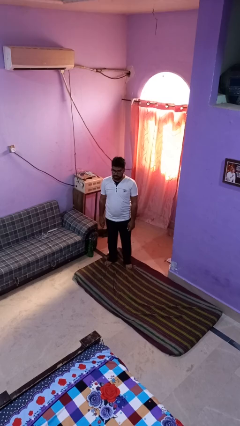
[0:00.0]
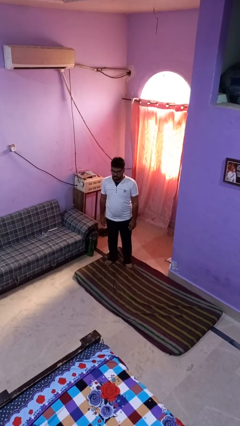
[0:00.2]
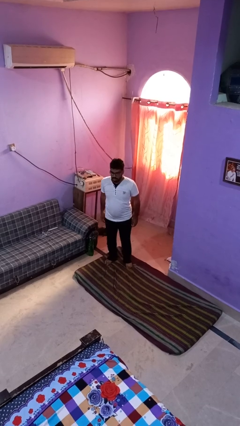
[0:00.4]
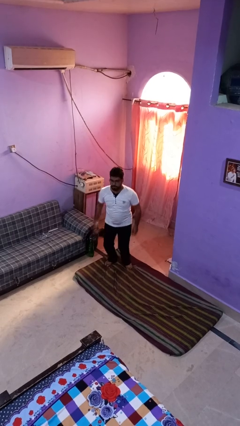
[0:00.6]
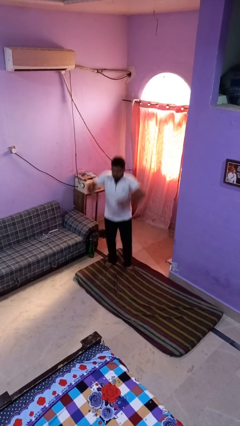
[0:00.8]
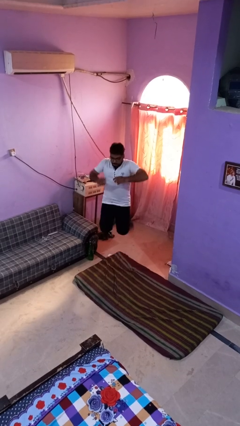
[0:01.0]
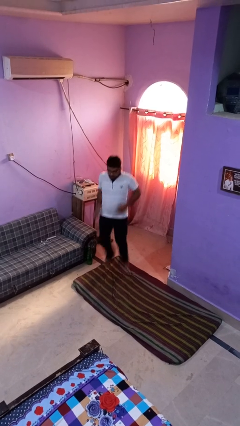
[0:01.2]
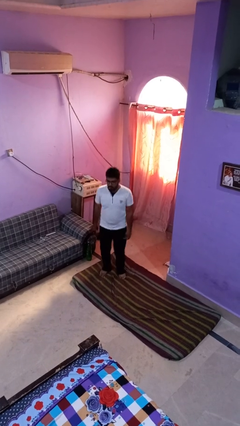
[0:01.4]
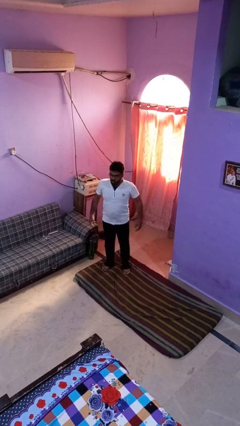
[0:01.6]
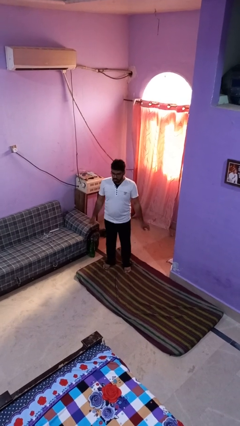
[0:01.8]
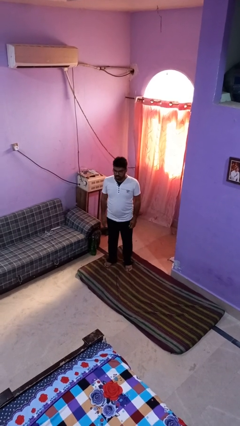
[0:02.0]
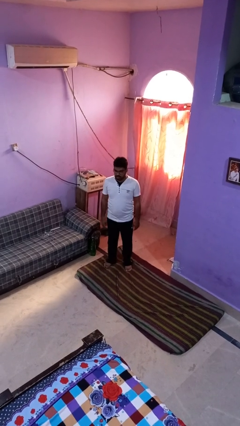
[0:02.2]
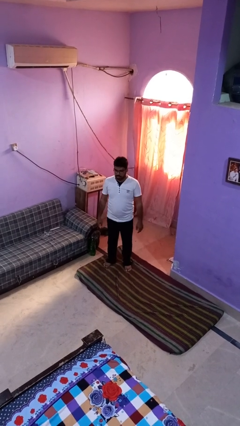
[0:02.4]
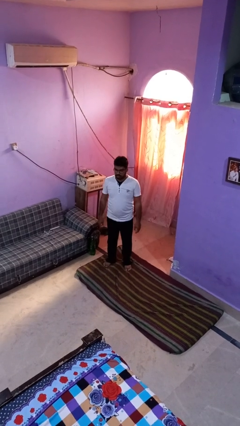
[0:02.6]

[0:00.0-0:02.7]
person jumps

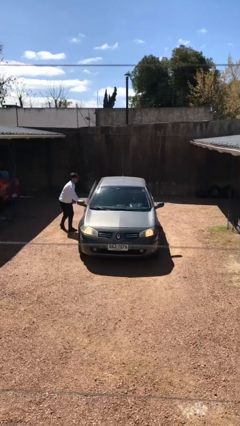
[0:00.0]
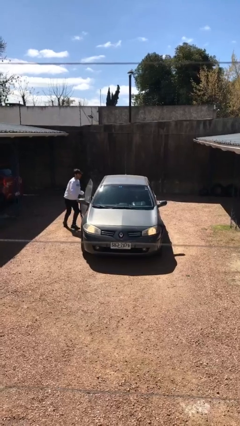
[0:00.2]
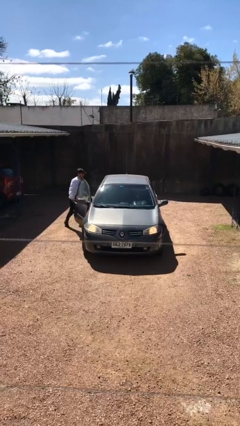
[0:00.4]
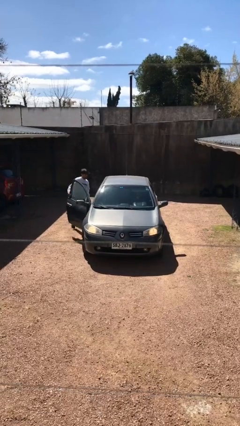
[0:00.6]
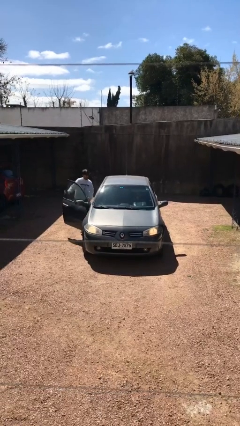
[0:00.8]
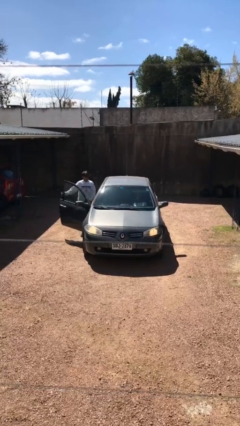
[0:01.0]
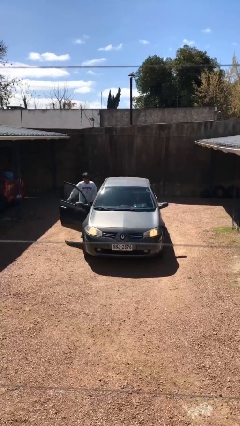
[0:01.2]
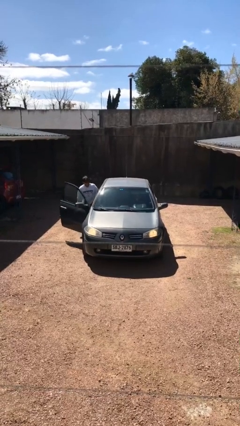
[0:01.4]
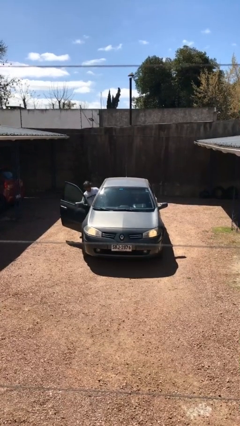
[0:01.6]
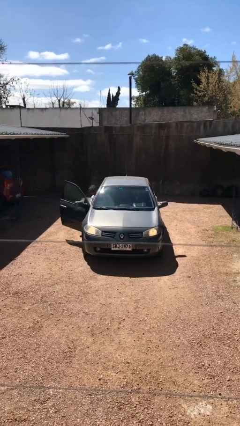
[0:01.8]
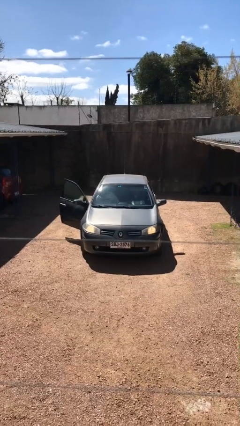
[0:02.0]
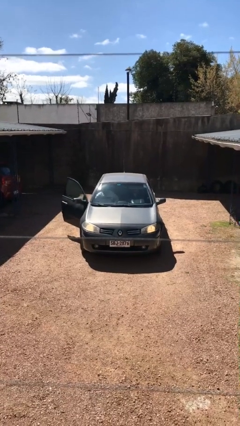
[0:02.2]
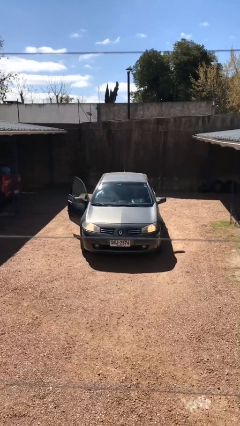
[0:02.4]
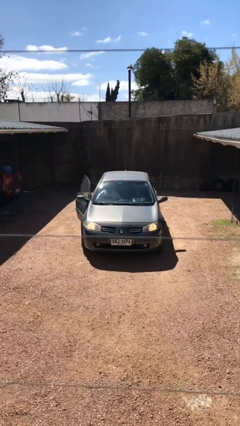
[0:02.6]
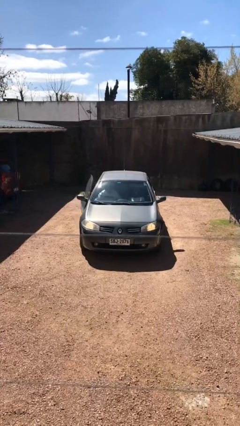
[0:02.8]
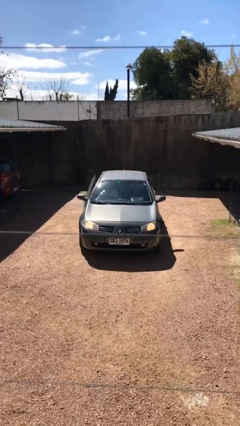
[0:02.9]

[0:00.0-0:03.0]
car picks up person

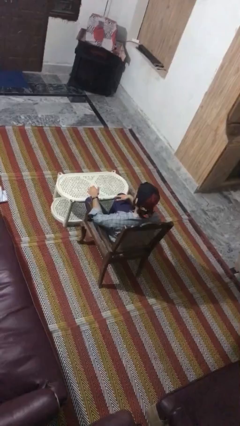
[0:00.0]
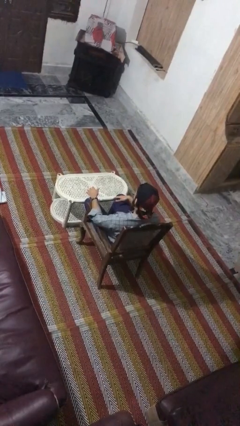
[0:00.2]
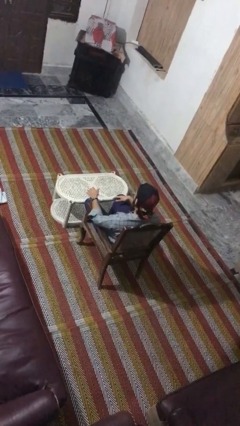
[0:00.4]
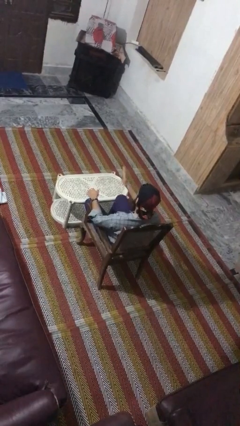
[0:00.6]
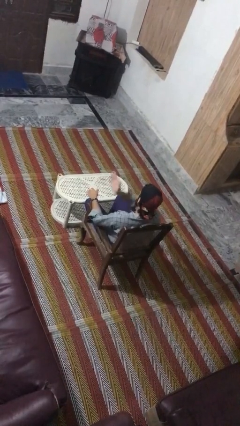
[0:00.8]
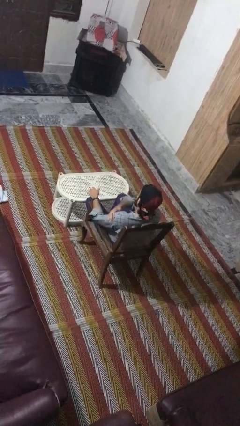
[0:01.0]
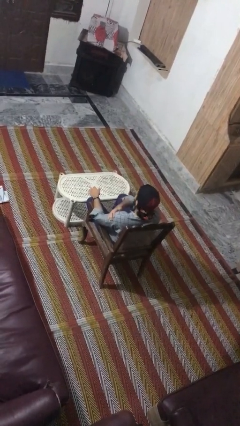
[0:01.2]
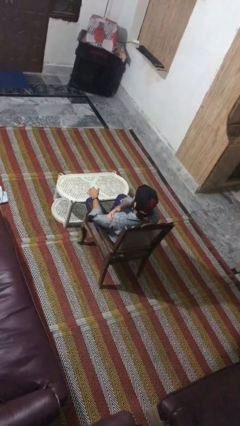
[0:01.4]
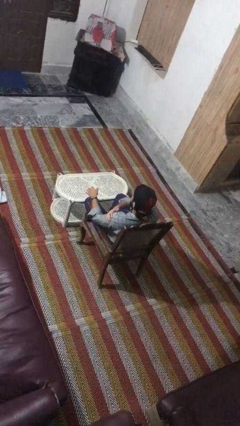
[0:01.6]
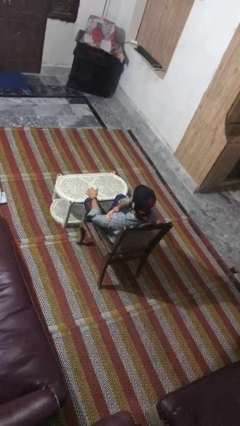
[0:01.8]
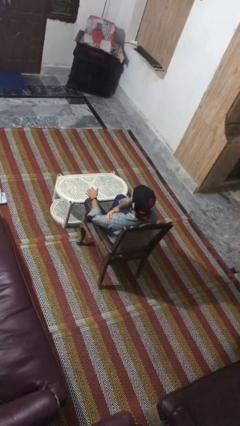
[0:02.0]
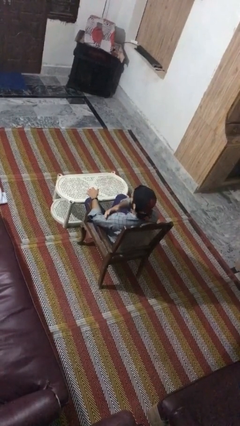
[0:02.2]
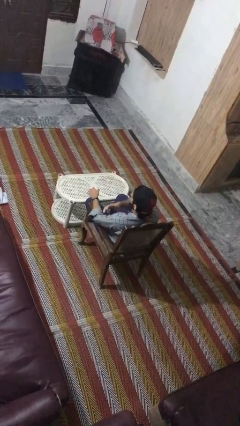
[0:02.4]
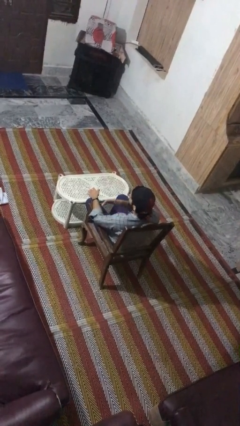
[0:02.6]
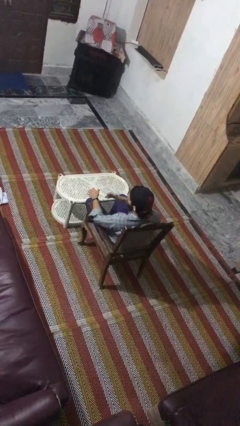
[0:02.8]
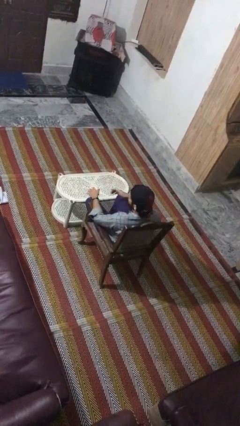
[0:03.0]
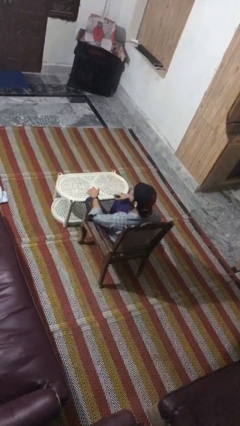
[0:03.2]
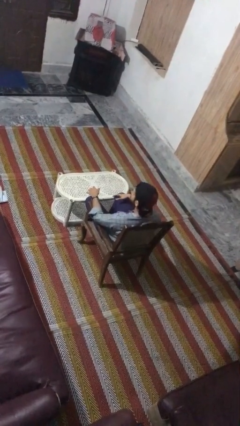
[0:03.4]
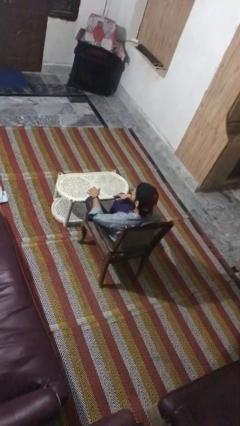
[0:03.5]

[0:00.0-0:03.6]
person swats bug

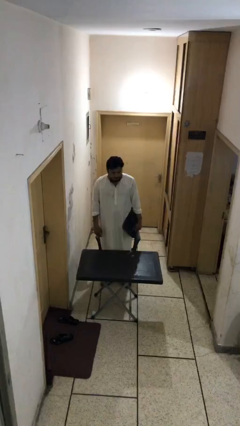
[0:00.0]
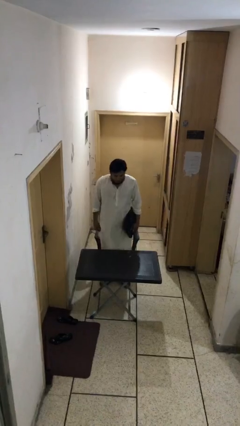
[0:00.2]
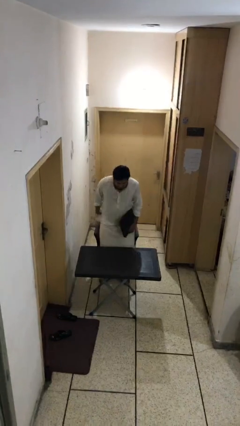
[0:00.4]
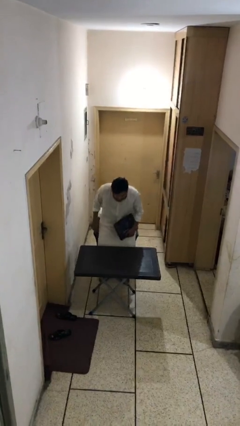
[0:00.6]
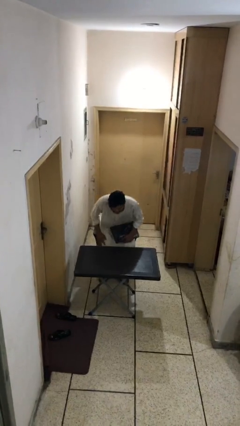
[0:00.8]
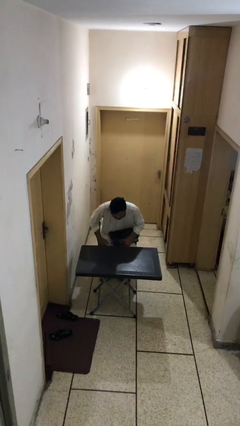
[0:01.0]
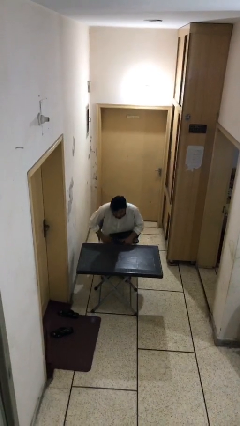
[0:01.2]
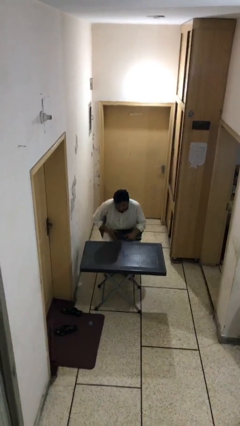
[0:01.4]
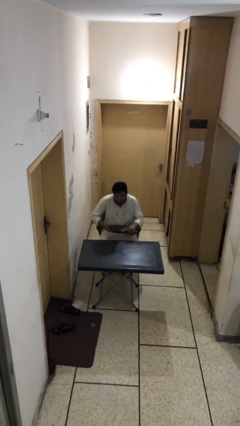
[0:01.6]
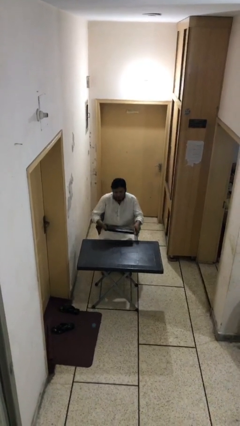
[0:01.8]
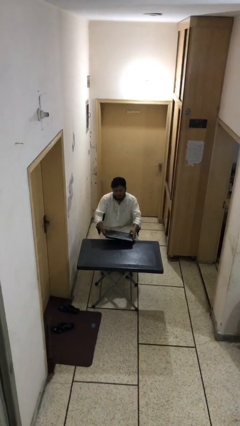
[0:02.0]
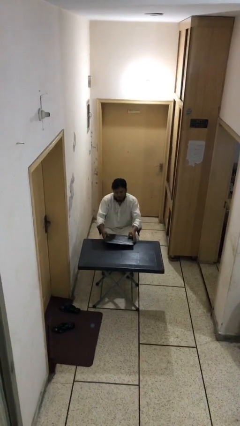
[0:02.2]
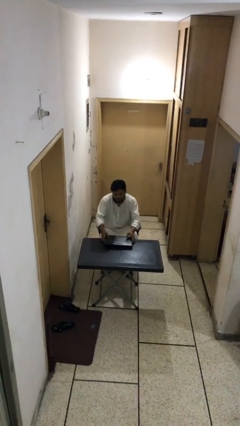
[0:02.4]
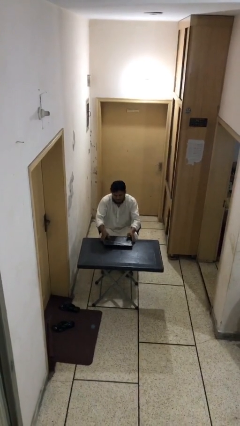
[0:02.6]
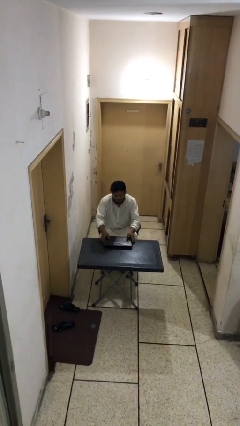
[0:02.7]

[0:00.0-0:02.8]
person sits down

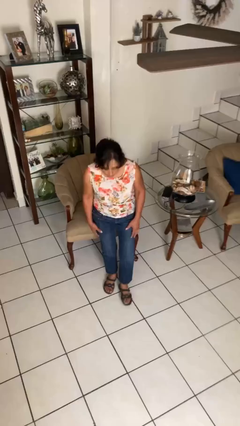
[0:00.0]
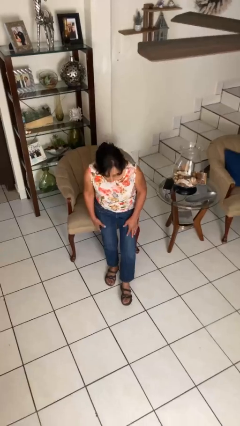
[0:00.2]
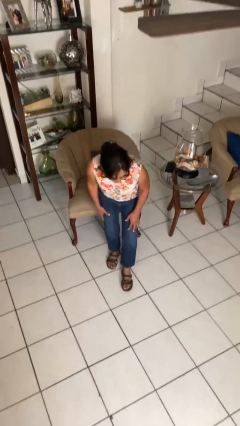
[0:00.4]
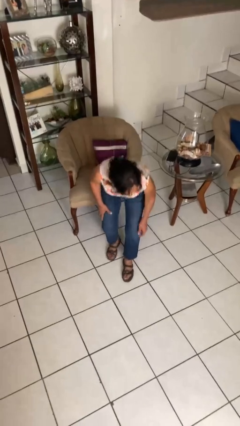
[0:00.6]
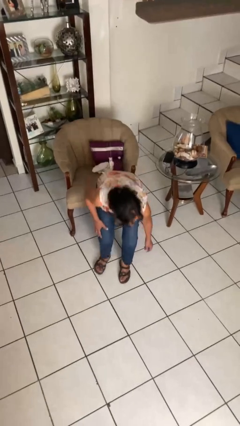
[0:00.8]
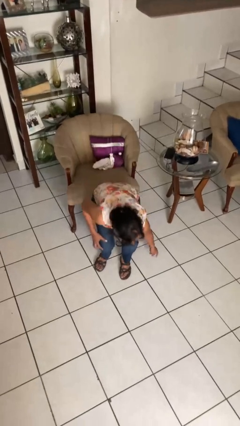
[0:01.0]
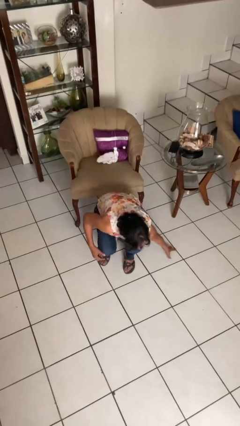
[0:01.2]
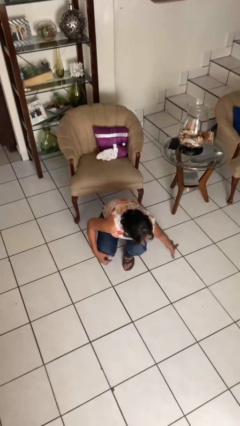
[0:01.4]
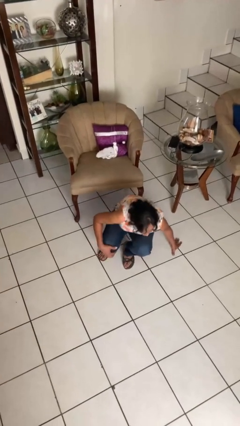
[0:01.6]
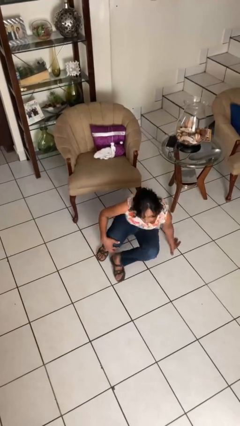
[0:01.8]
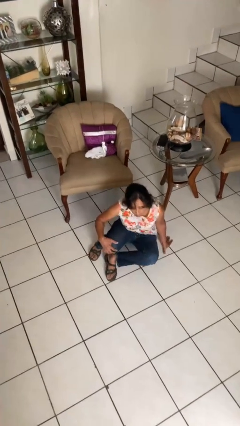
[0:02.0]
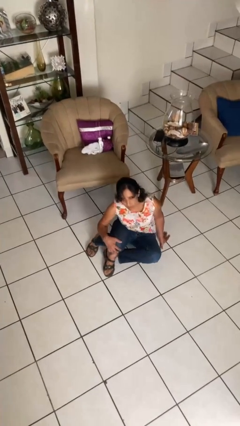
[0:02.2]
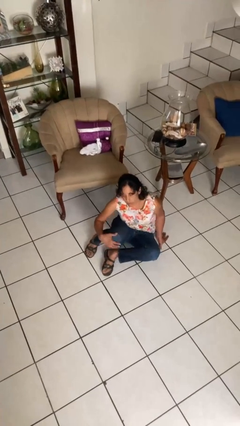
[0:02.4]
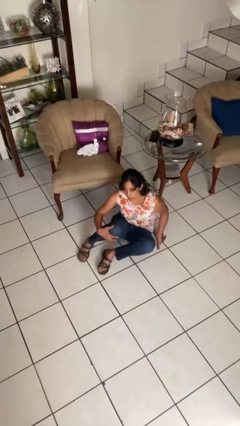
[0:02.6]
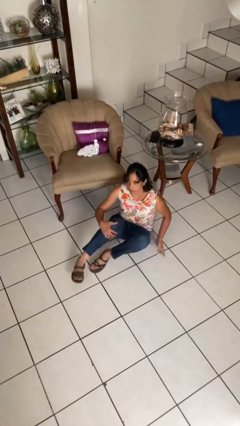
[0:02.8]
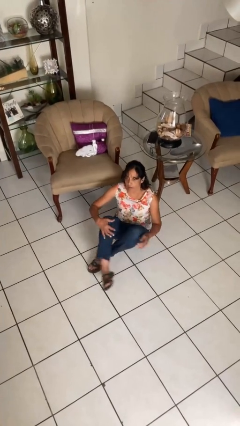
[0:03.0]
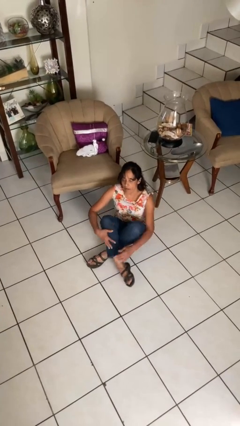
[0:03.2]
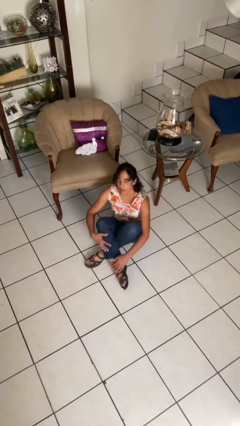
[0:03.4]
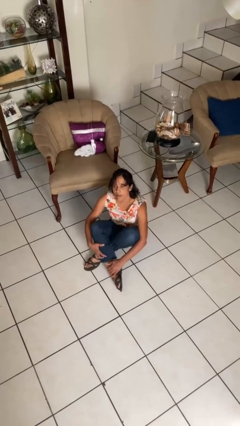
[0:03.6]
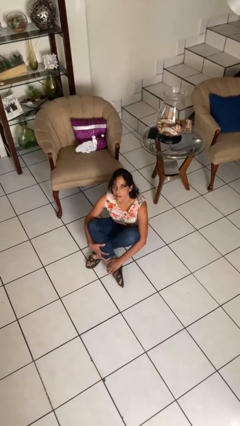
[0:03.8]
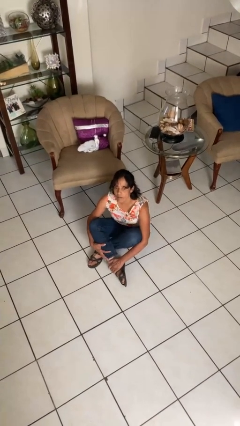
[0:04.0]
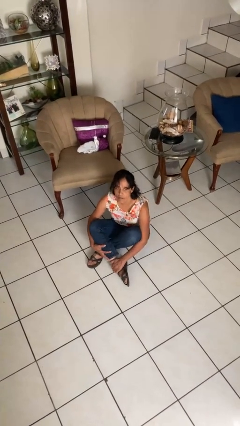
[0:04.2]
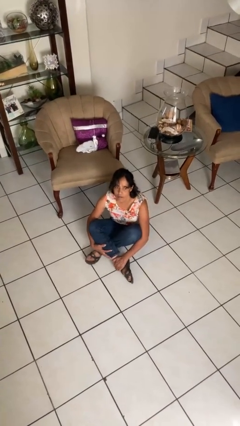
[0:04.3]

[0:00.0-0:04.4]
person sits crisscross

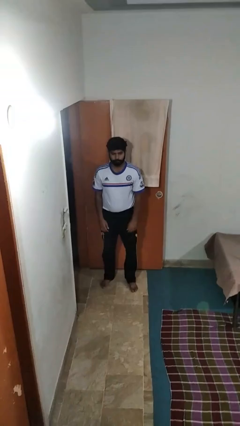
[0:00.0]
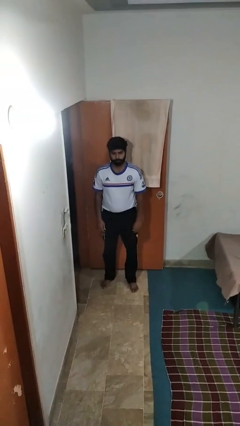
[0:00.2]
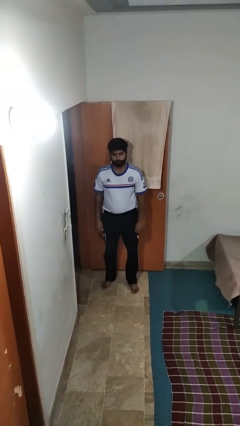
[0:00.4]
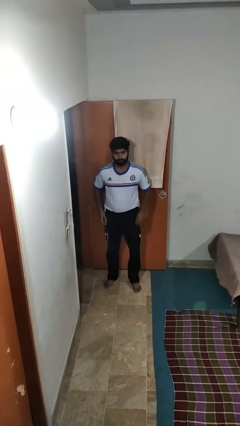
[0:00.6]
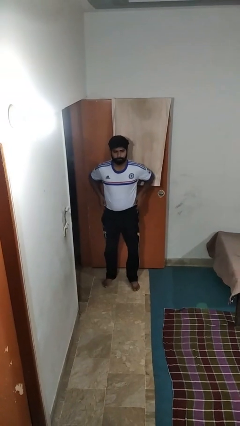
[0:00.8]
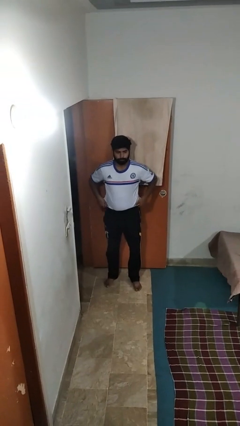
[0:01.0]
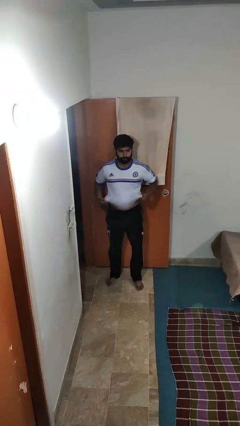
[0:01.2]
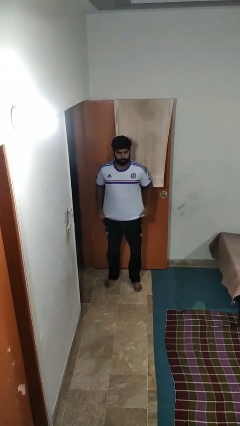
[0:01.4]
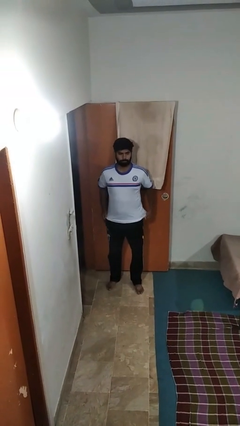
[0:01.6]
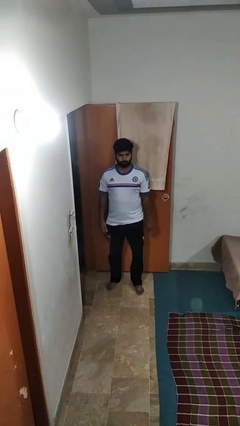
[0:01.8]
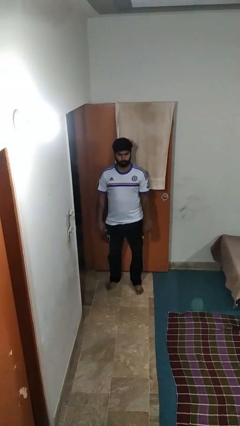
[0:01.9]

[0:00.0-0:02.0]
person untucks shirt
